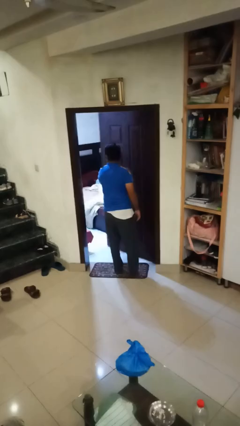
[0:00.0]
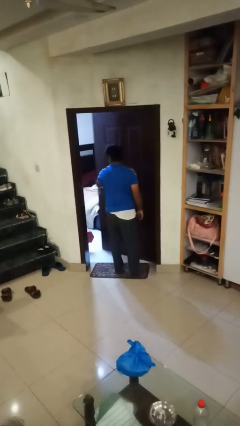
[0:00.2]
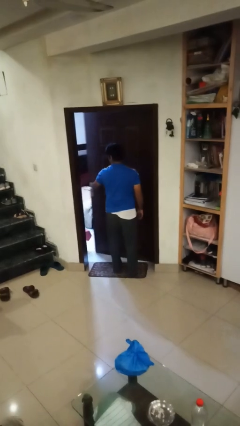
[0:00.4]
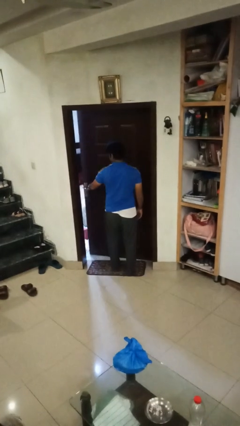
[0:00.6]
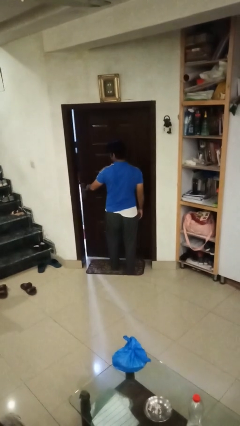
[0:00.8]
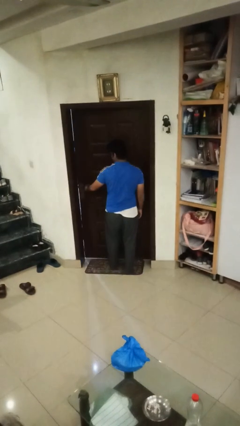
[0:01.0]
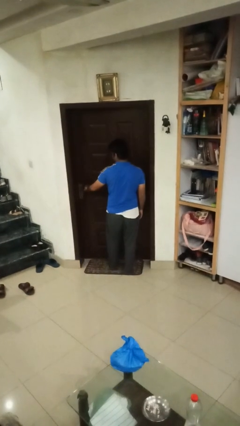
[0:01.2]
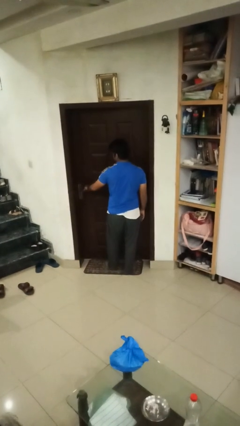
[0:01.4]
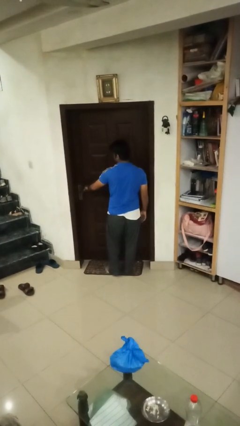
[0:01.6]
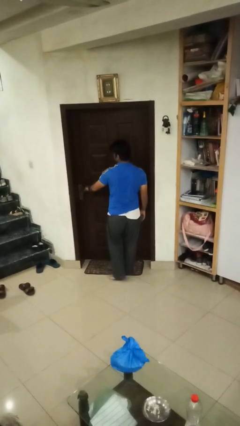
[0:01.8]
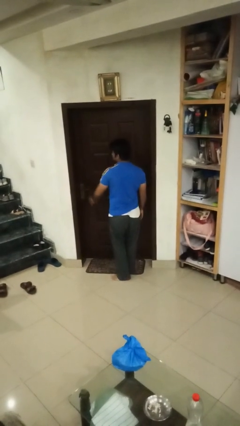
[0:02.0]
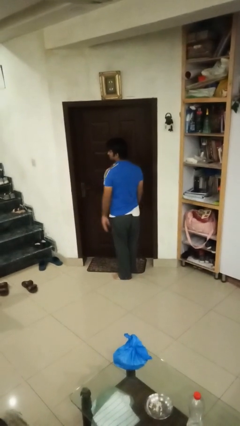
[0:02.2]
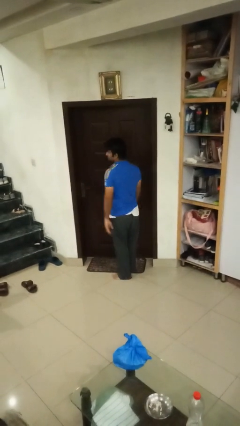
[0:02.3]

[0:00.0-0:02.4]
person closes facility door

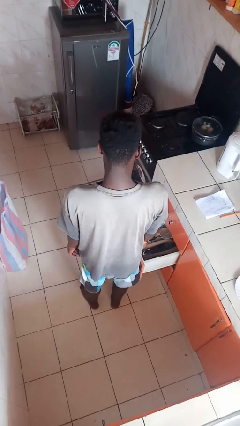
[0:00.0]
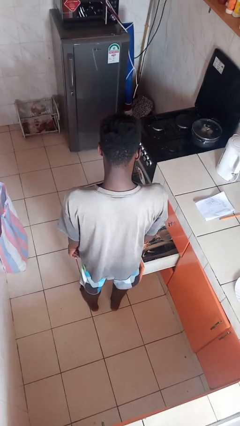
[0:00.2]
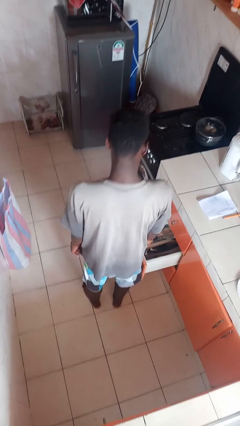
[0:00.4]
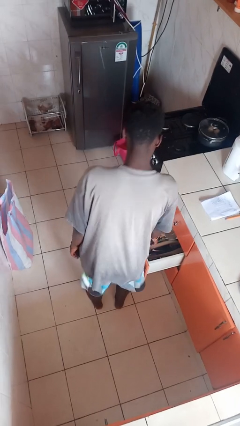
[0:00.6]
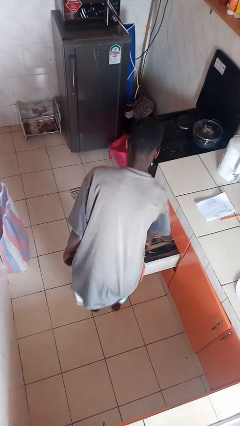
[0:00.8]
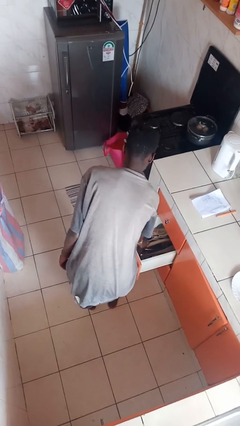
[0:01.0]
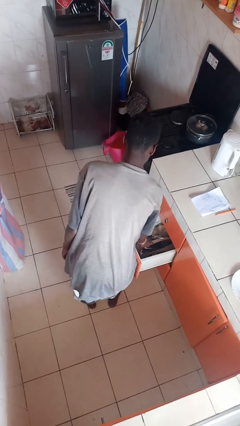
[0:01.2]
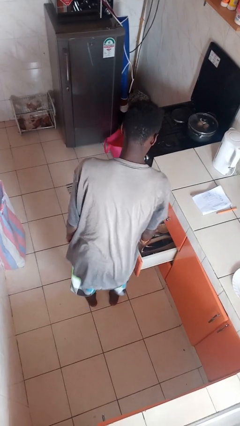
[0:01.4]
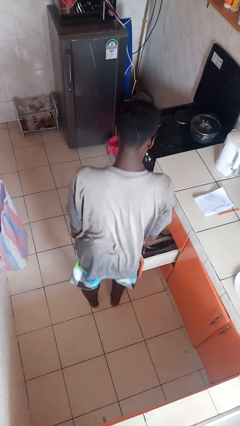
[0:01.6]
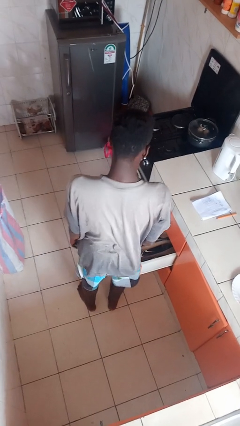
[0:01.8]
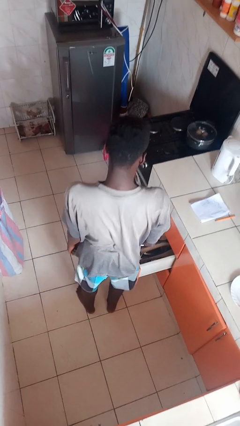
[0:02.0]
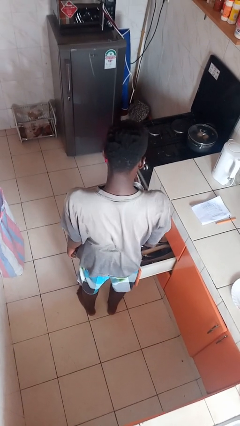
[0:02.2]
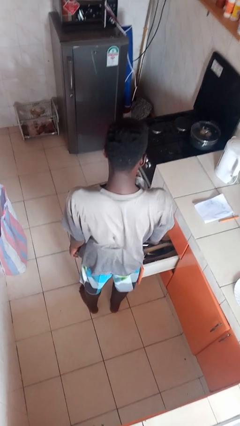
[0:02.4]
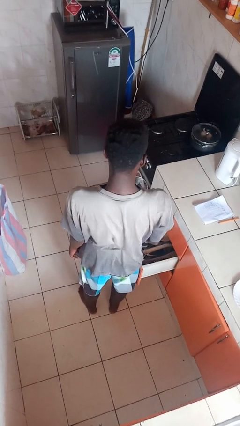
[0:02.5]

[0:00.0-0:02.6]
person takes object from kitchen drawer

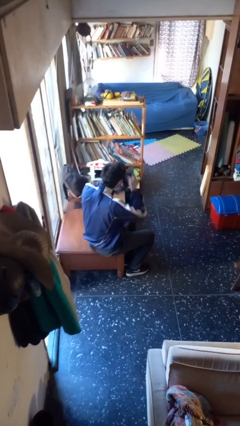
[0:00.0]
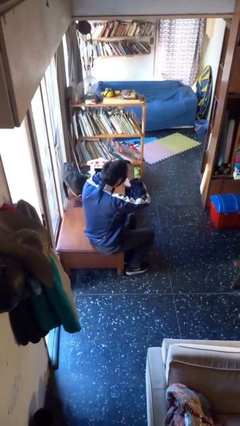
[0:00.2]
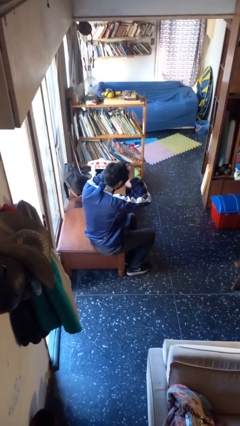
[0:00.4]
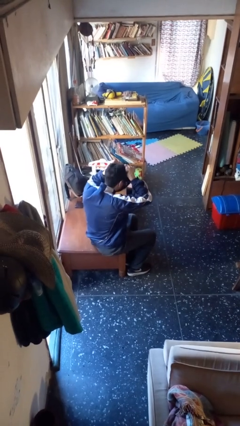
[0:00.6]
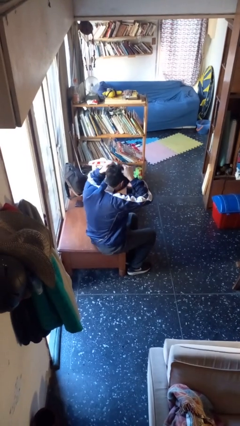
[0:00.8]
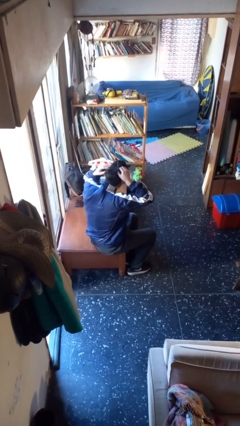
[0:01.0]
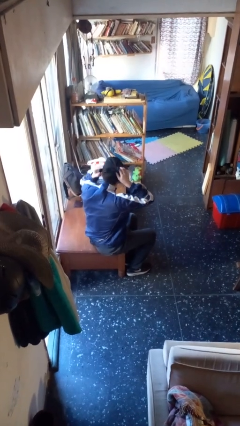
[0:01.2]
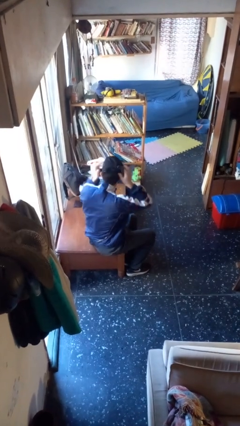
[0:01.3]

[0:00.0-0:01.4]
person puts on facemask

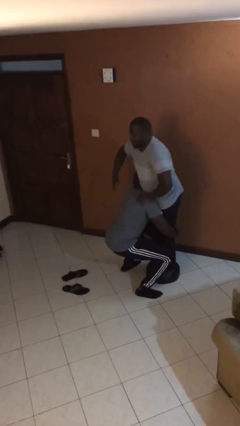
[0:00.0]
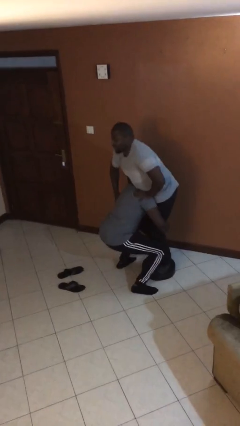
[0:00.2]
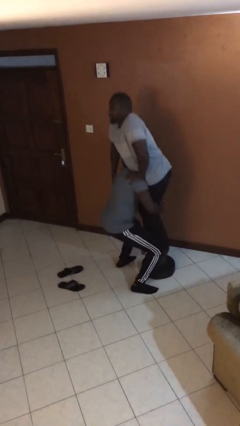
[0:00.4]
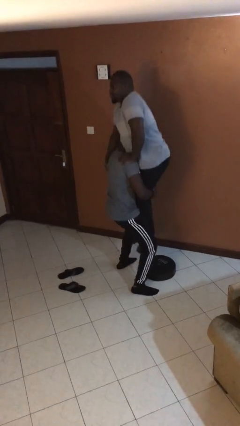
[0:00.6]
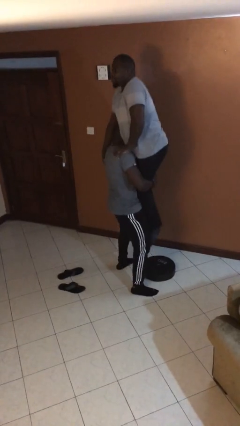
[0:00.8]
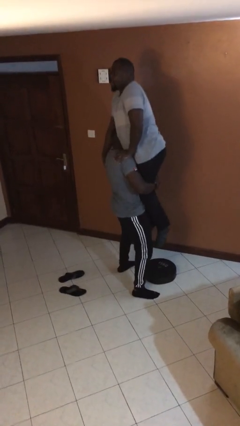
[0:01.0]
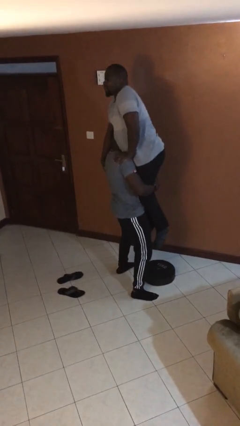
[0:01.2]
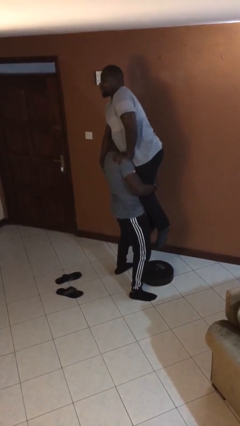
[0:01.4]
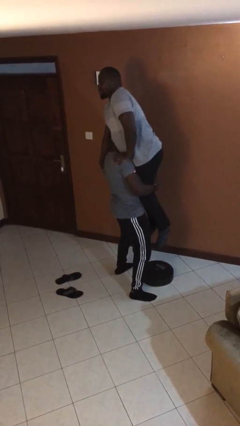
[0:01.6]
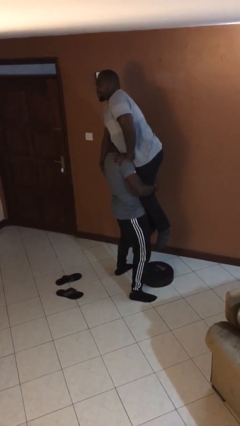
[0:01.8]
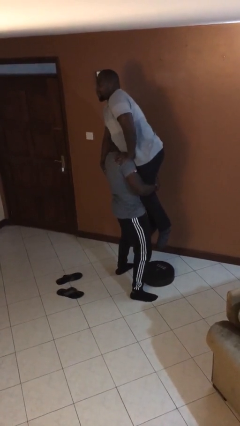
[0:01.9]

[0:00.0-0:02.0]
person picks up person

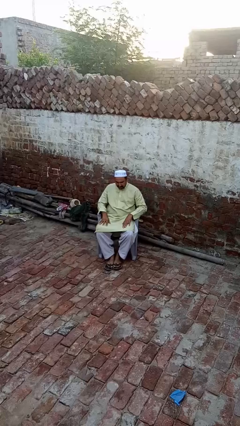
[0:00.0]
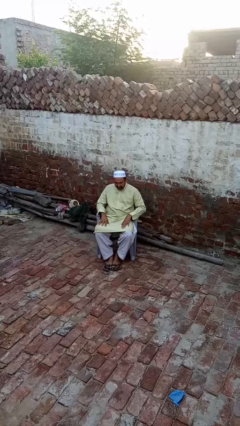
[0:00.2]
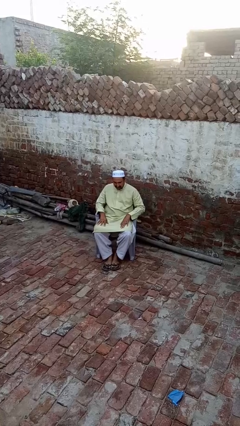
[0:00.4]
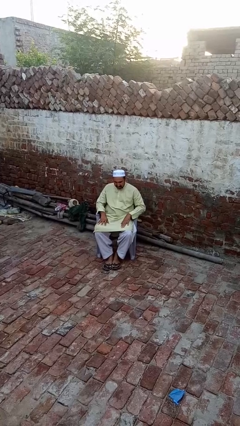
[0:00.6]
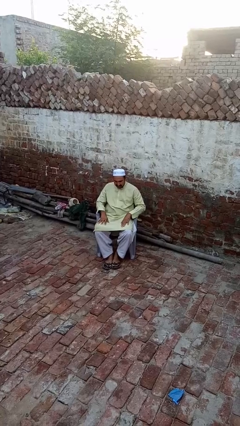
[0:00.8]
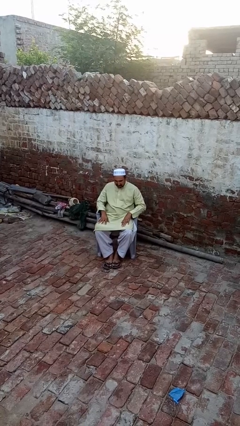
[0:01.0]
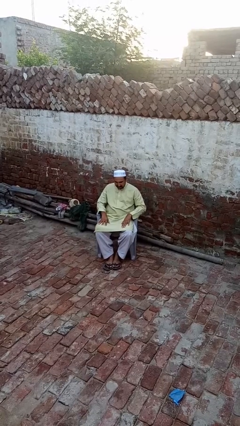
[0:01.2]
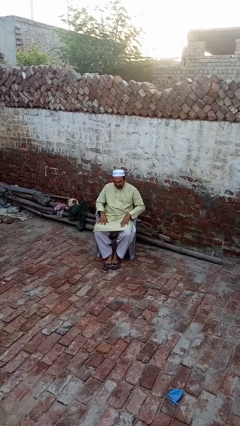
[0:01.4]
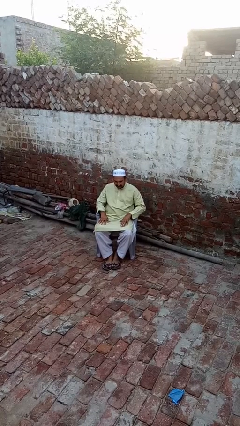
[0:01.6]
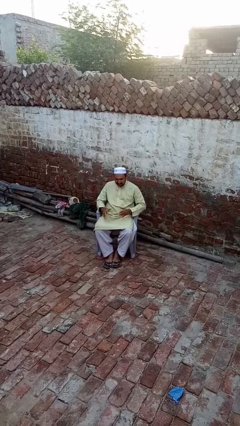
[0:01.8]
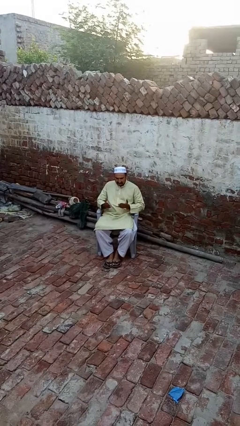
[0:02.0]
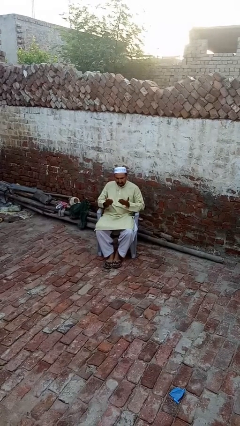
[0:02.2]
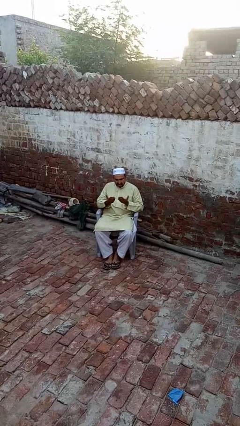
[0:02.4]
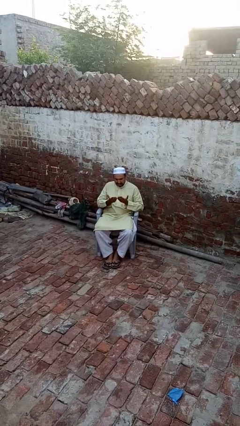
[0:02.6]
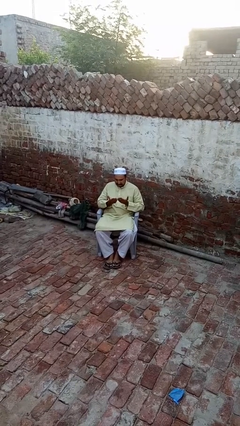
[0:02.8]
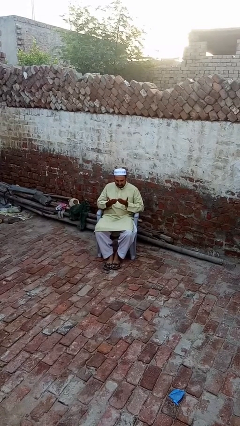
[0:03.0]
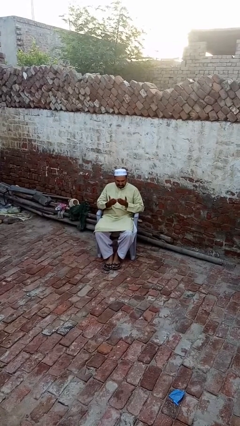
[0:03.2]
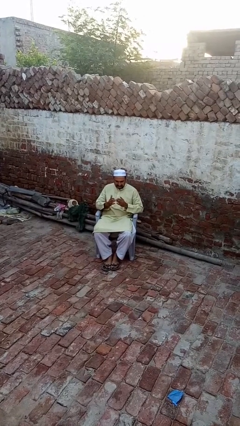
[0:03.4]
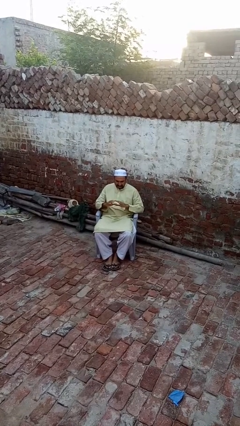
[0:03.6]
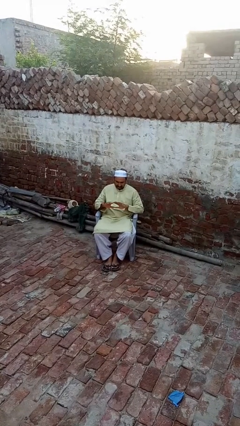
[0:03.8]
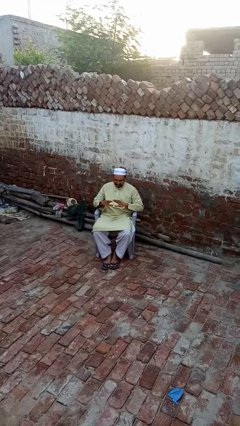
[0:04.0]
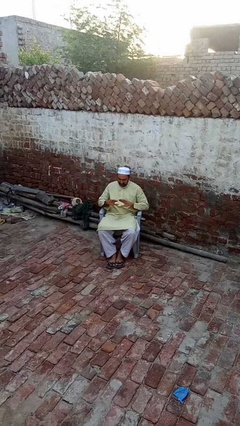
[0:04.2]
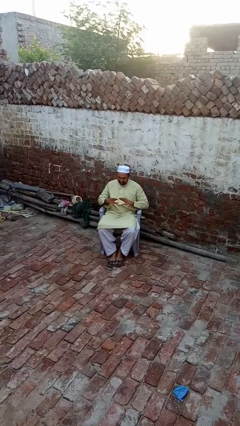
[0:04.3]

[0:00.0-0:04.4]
person looks at hands in lap

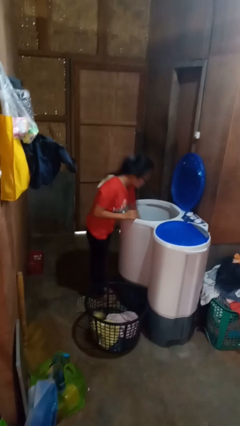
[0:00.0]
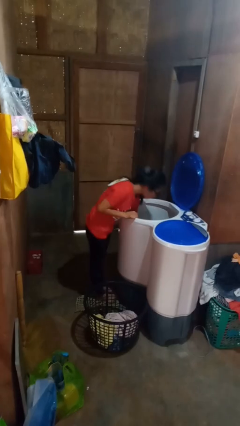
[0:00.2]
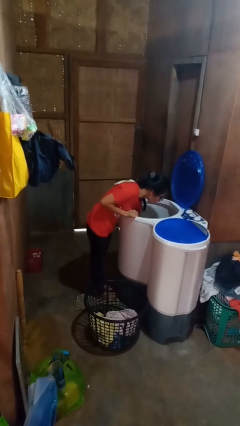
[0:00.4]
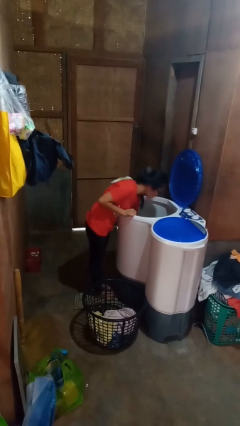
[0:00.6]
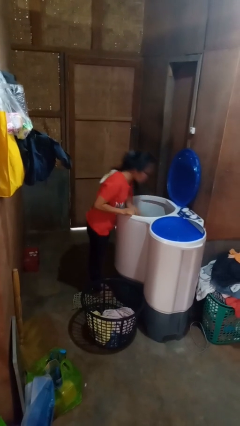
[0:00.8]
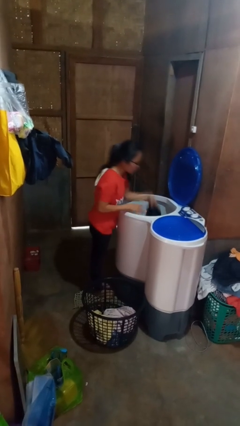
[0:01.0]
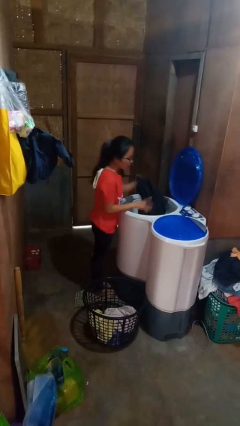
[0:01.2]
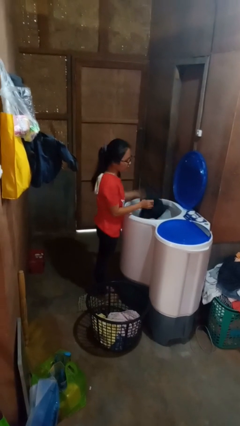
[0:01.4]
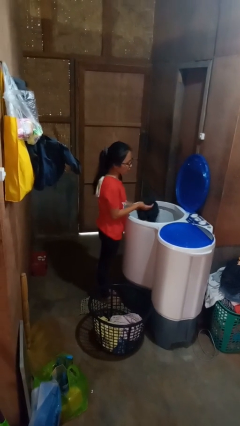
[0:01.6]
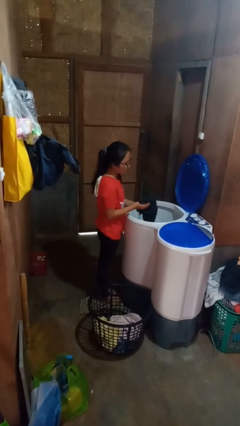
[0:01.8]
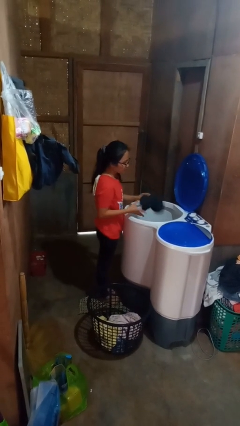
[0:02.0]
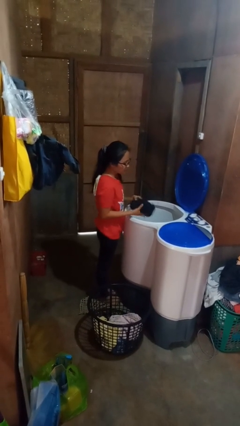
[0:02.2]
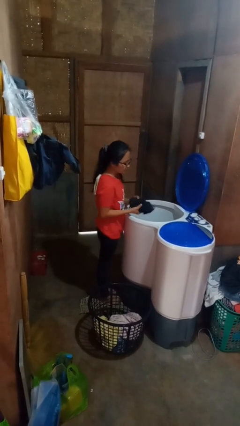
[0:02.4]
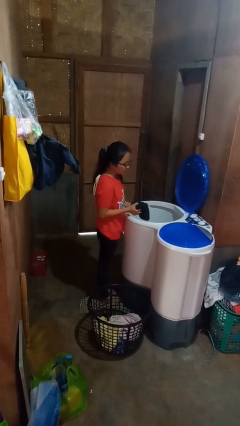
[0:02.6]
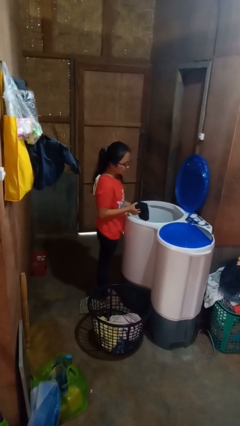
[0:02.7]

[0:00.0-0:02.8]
person loads clotheswasher

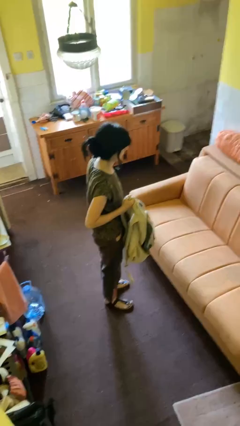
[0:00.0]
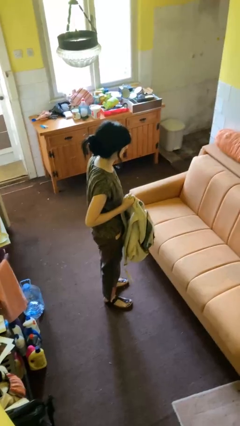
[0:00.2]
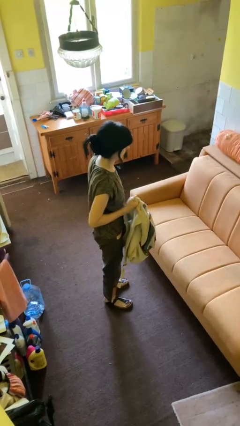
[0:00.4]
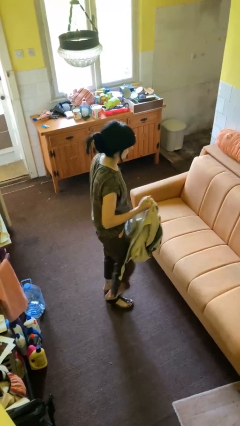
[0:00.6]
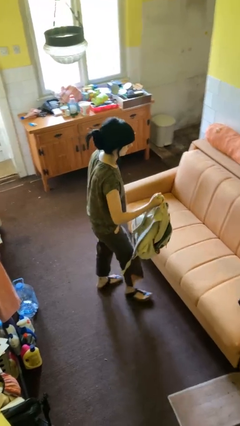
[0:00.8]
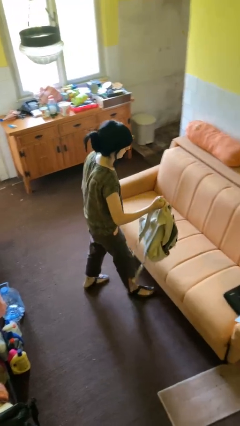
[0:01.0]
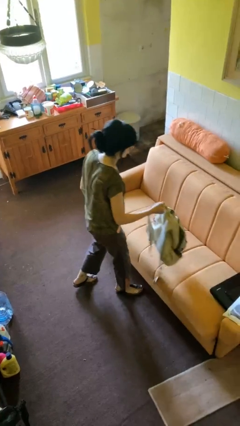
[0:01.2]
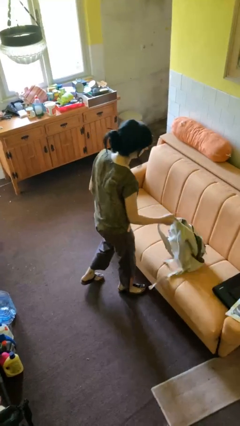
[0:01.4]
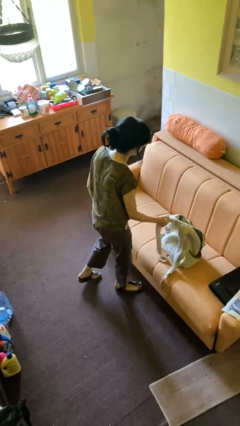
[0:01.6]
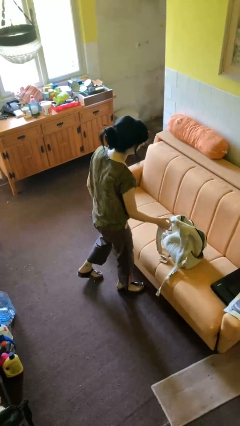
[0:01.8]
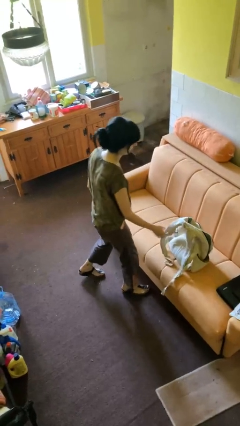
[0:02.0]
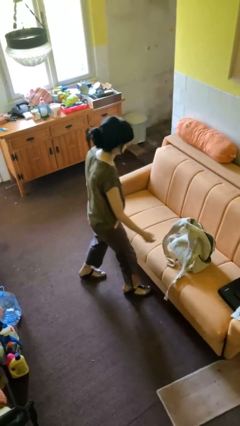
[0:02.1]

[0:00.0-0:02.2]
person puts down object on couch
